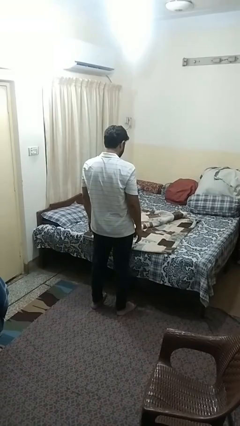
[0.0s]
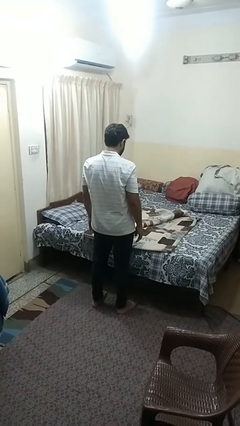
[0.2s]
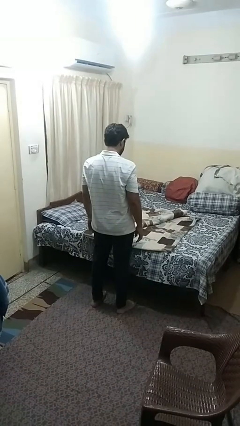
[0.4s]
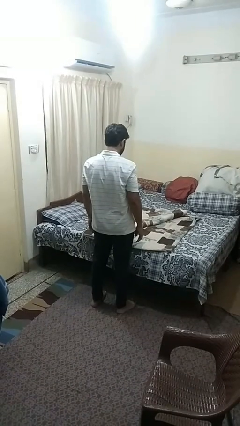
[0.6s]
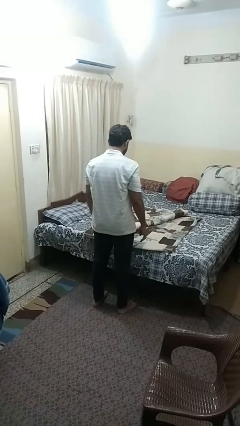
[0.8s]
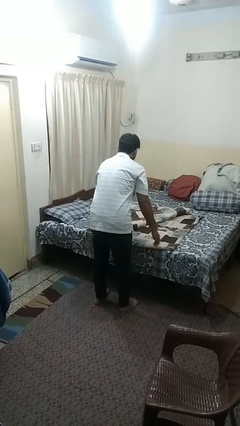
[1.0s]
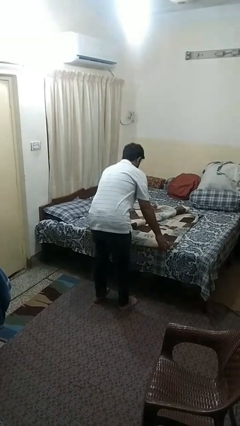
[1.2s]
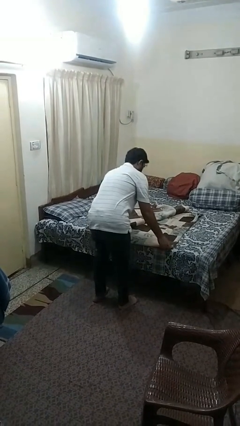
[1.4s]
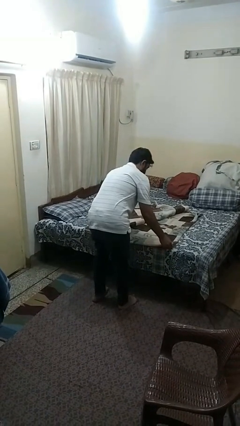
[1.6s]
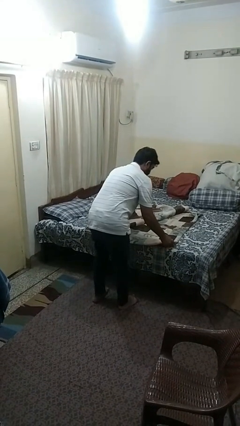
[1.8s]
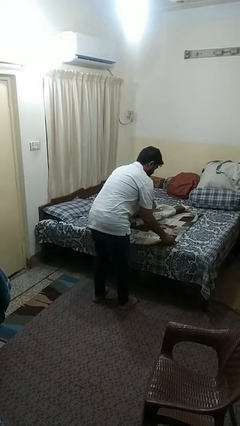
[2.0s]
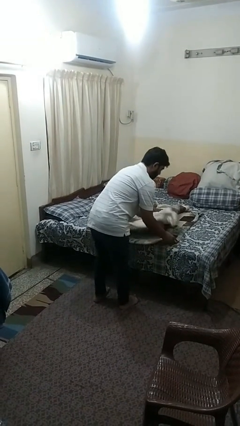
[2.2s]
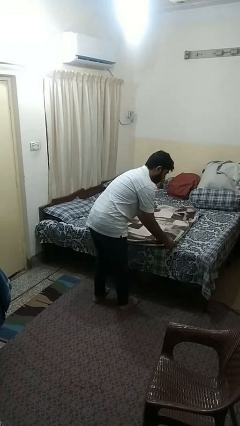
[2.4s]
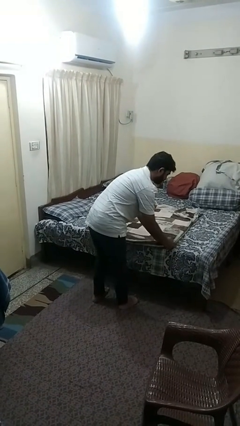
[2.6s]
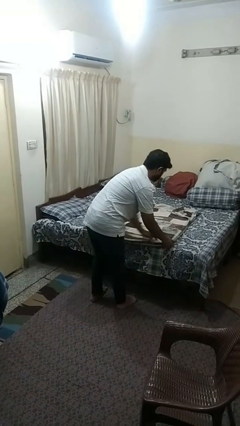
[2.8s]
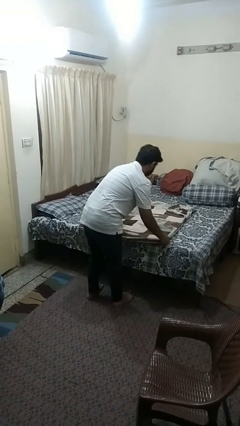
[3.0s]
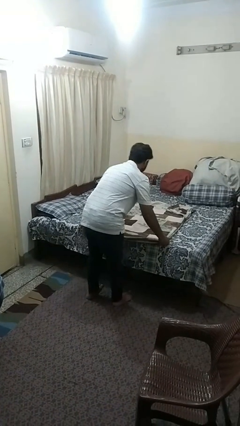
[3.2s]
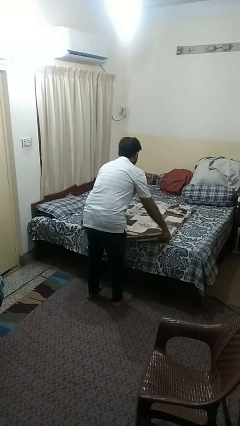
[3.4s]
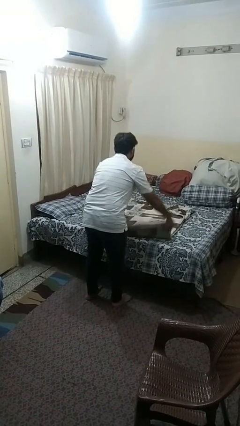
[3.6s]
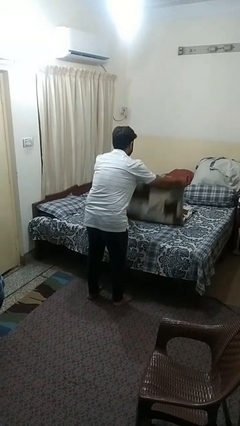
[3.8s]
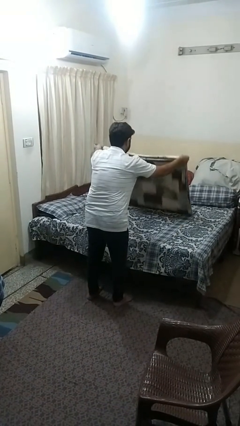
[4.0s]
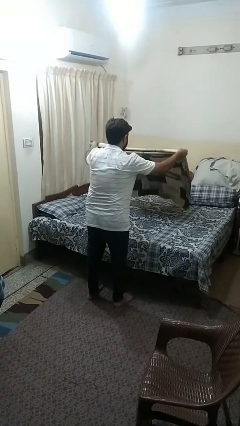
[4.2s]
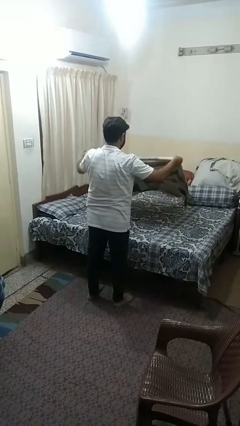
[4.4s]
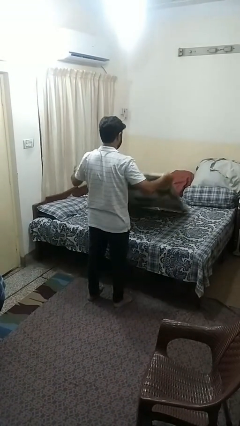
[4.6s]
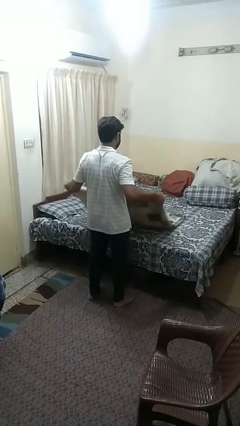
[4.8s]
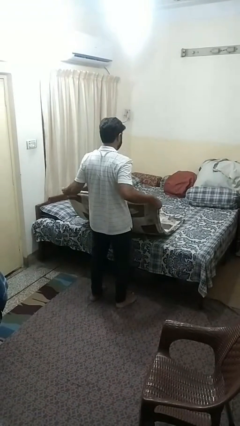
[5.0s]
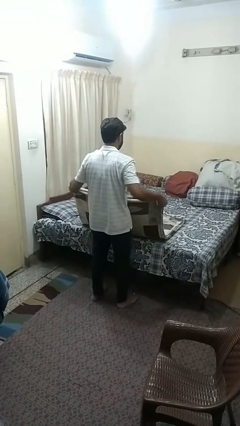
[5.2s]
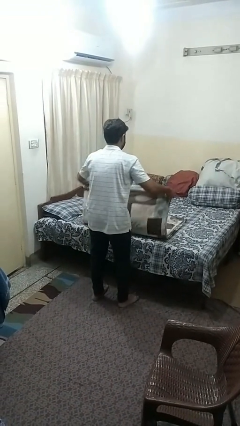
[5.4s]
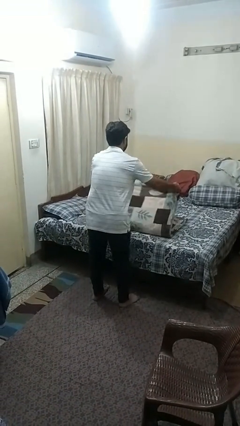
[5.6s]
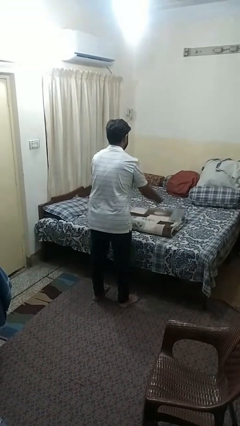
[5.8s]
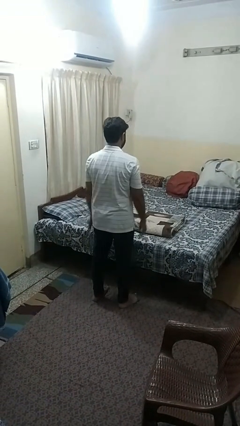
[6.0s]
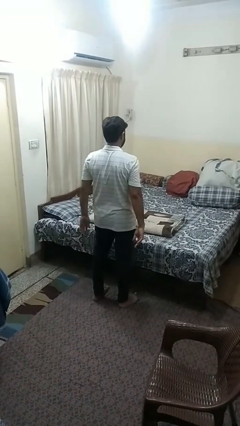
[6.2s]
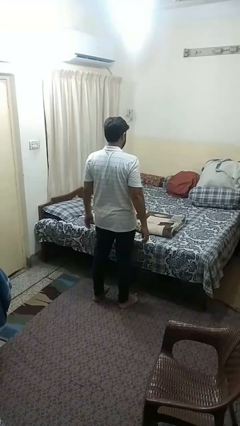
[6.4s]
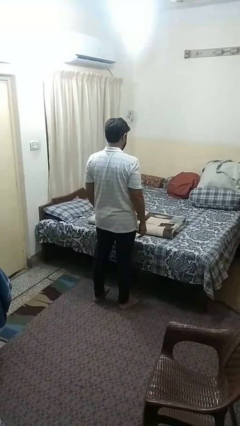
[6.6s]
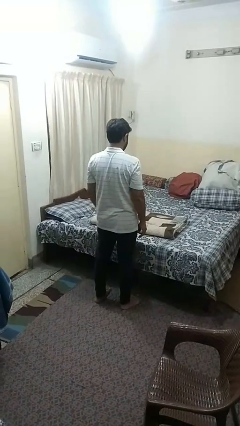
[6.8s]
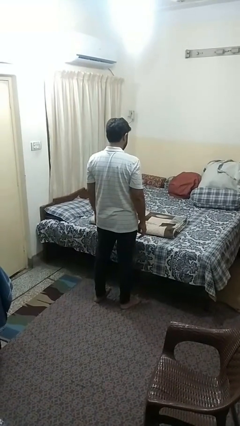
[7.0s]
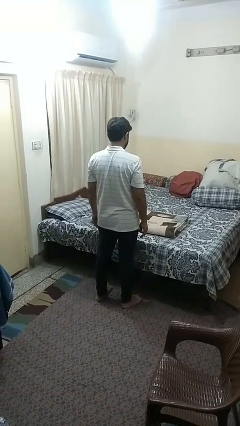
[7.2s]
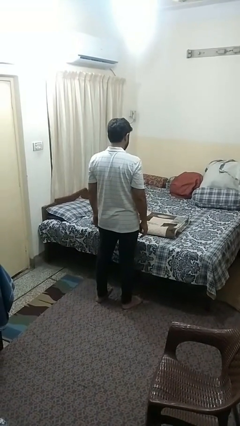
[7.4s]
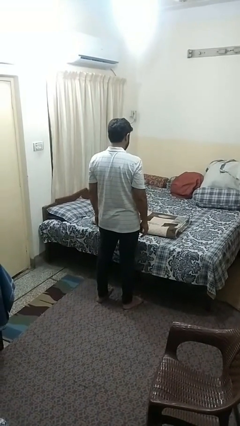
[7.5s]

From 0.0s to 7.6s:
person folds blanket

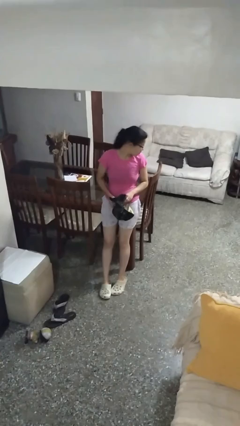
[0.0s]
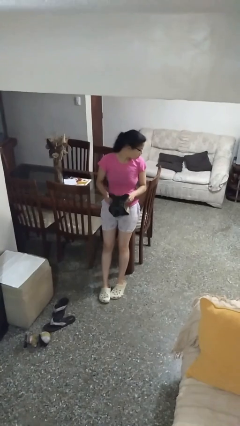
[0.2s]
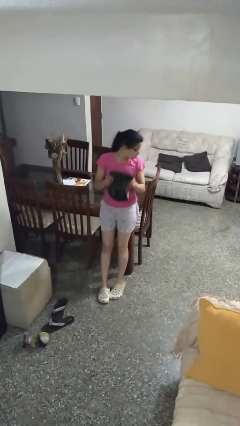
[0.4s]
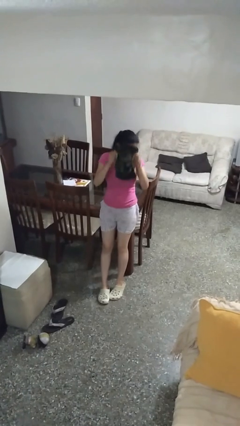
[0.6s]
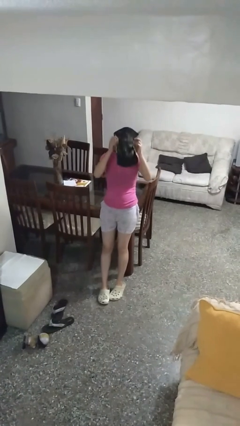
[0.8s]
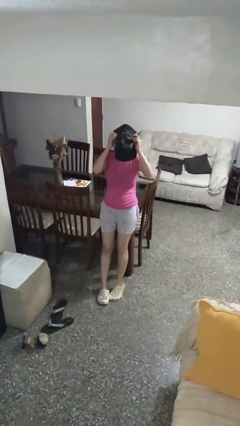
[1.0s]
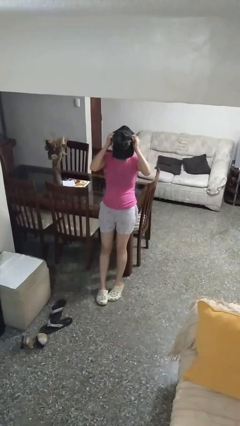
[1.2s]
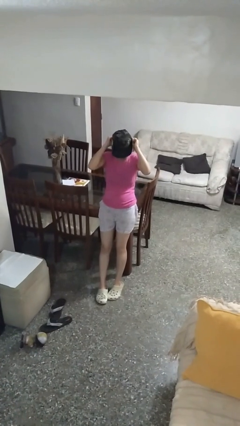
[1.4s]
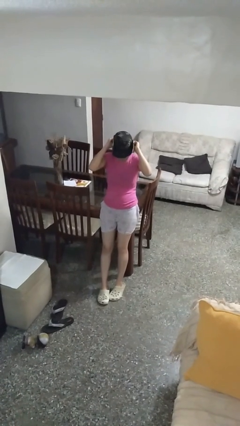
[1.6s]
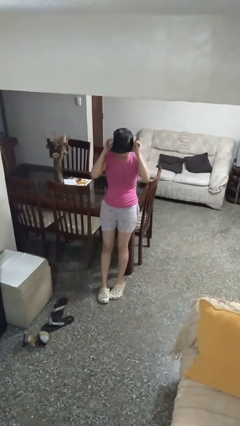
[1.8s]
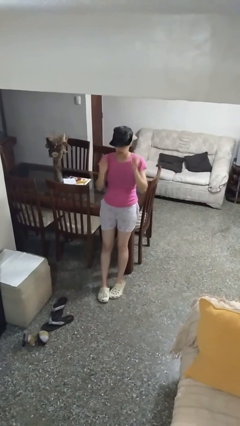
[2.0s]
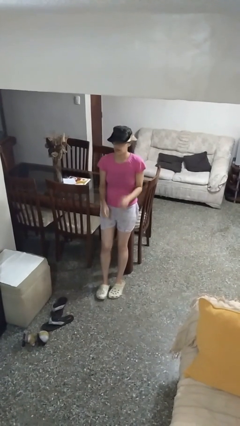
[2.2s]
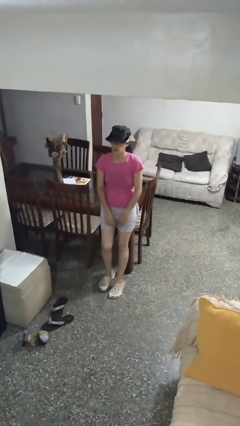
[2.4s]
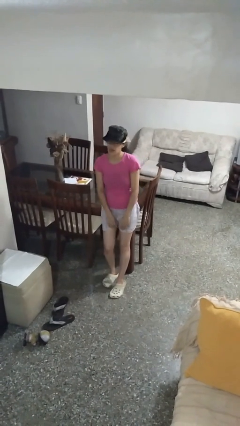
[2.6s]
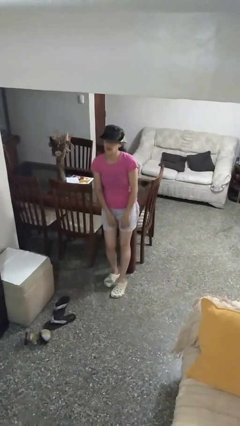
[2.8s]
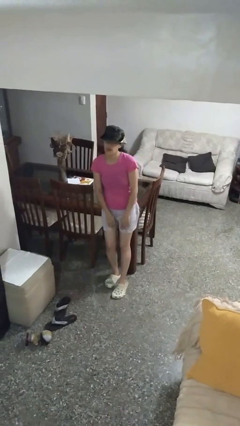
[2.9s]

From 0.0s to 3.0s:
person puts on hat

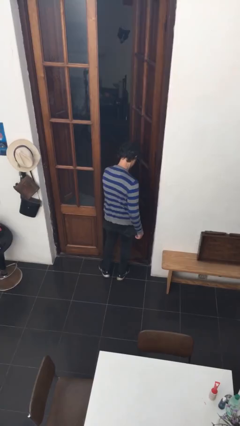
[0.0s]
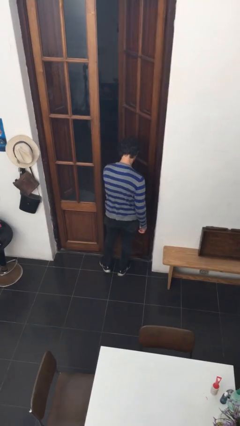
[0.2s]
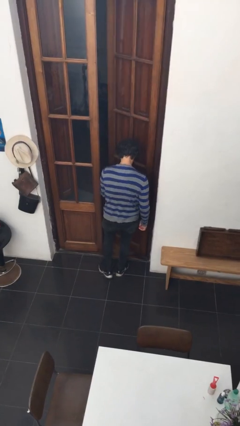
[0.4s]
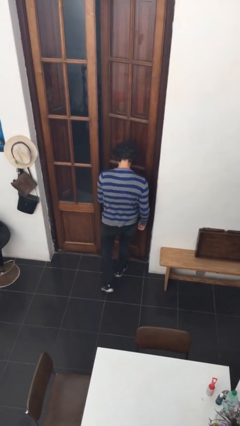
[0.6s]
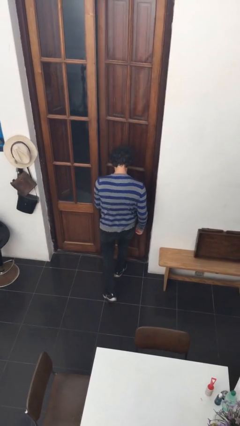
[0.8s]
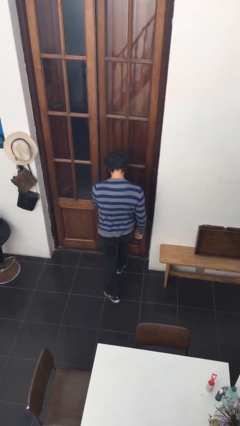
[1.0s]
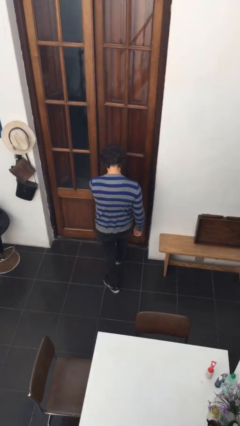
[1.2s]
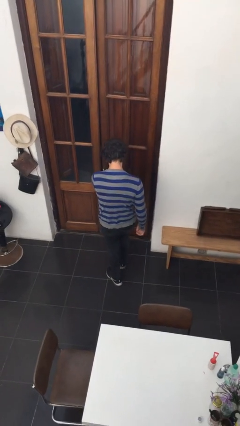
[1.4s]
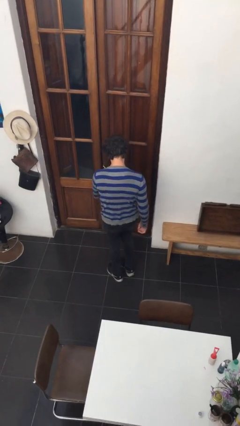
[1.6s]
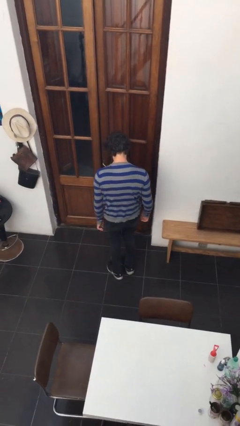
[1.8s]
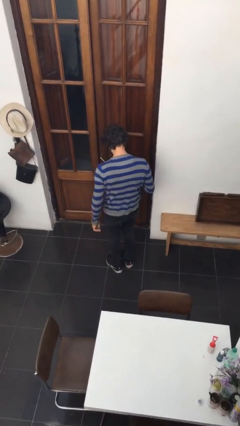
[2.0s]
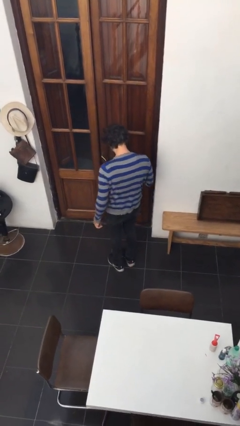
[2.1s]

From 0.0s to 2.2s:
person closes facility door

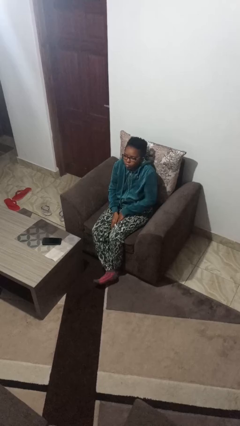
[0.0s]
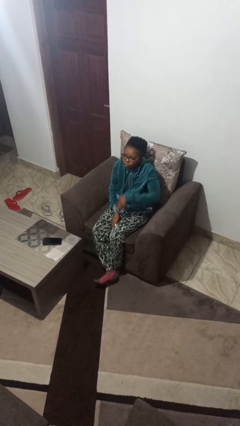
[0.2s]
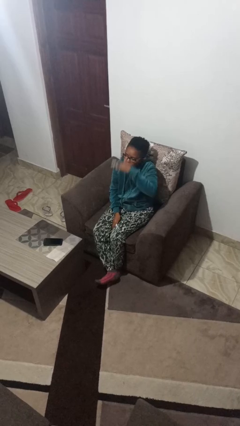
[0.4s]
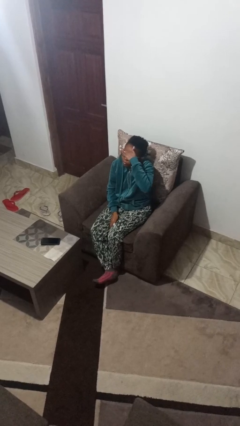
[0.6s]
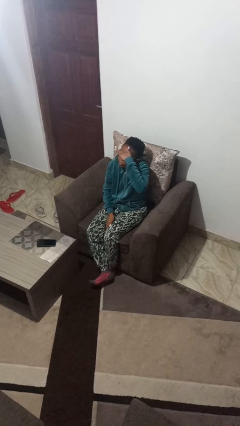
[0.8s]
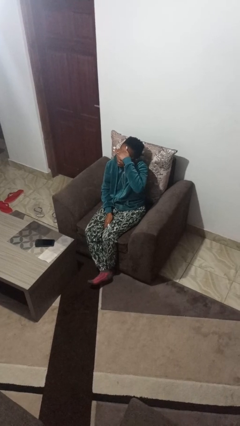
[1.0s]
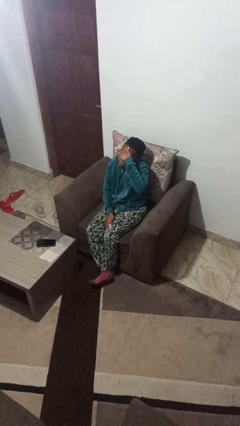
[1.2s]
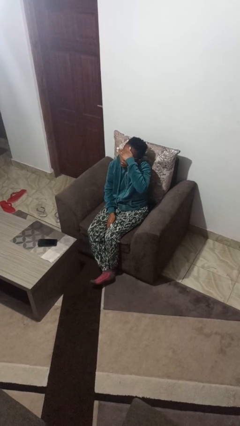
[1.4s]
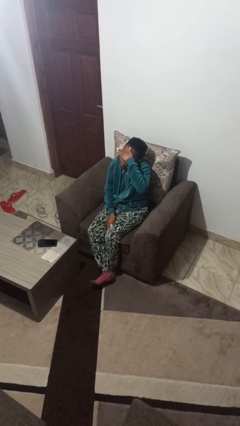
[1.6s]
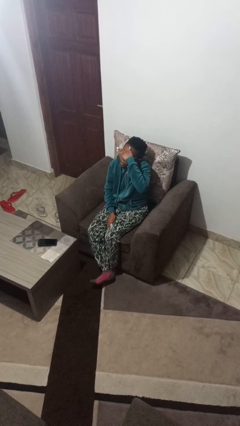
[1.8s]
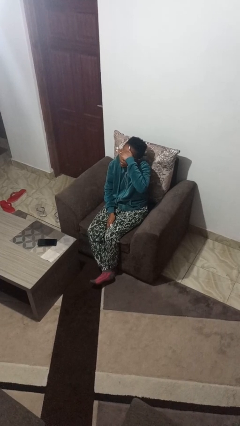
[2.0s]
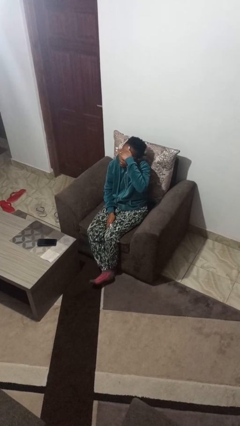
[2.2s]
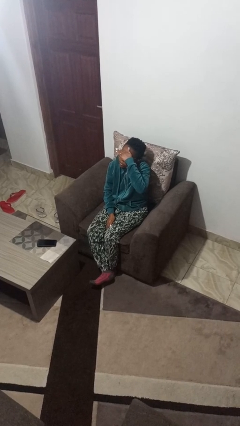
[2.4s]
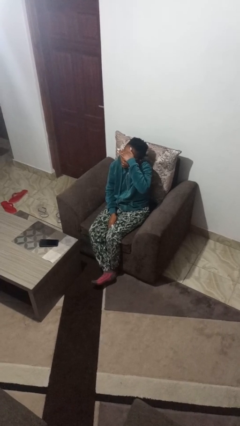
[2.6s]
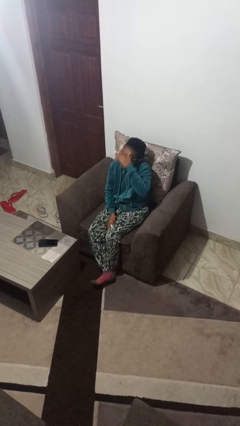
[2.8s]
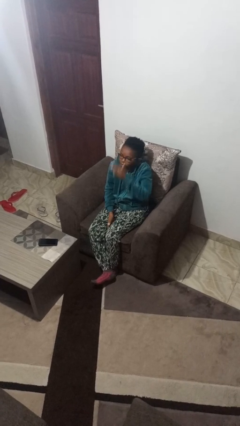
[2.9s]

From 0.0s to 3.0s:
person shades eyes

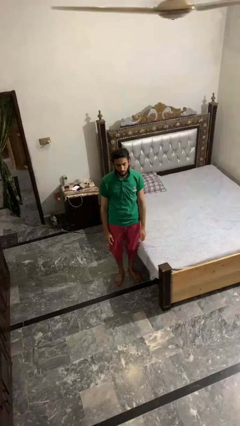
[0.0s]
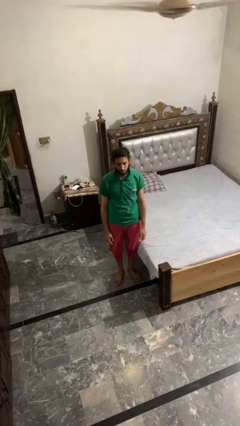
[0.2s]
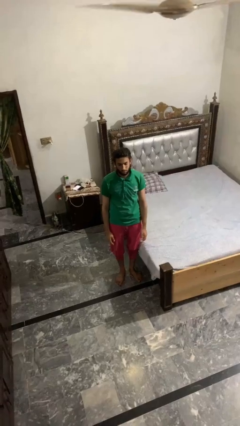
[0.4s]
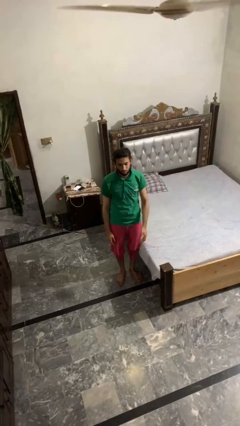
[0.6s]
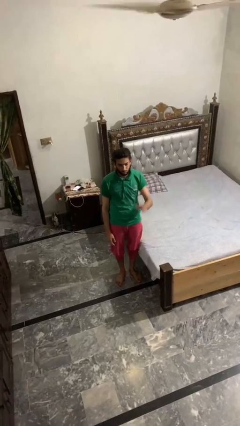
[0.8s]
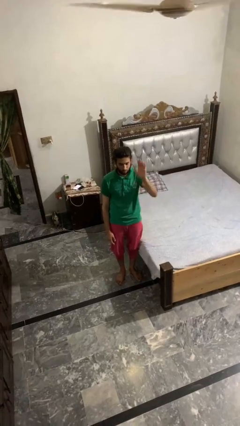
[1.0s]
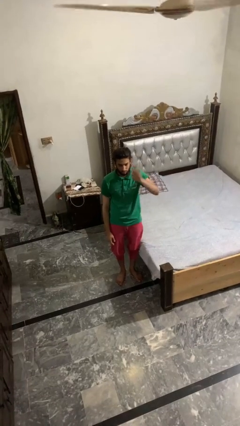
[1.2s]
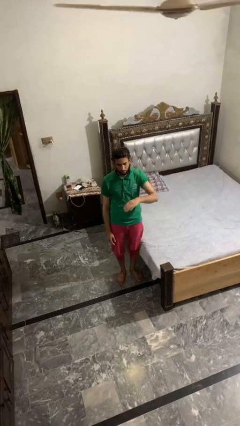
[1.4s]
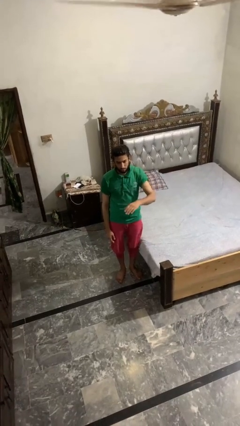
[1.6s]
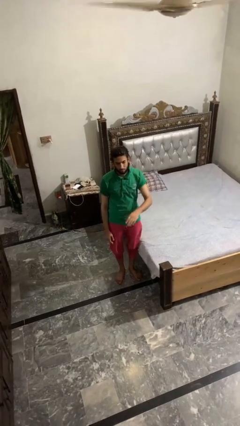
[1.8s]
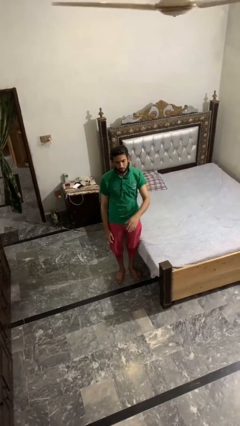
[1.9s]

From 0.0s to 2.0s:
person gestures swipe down
